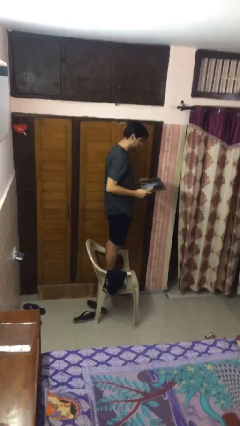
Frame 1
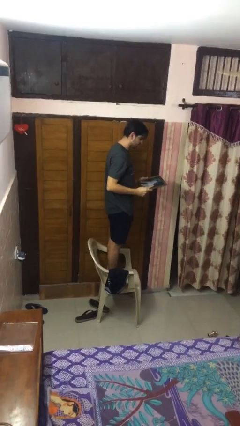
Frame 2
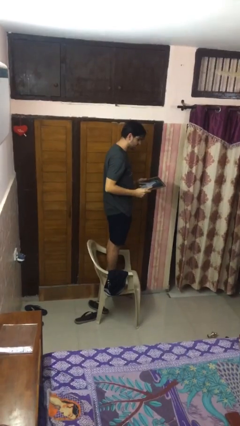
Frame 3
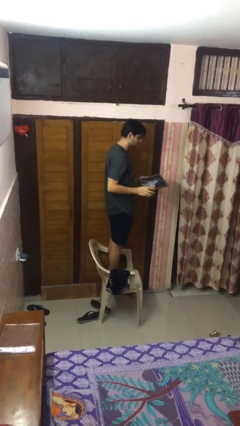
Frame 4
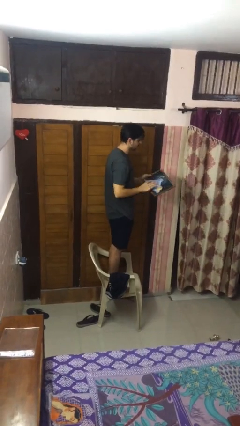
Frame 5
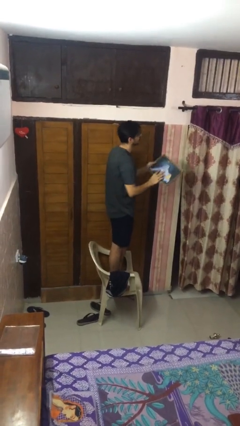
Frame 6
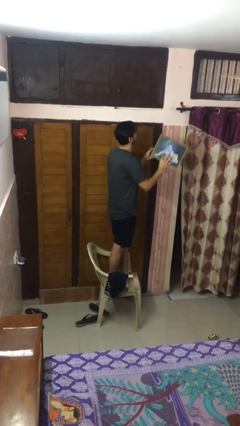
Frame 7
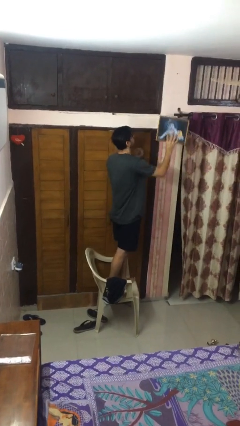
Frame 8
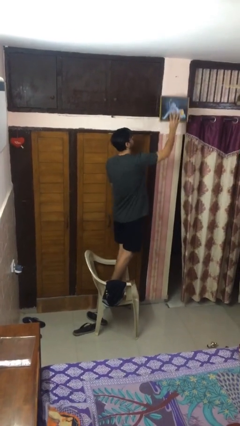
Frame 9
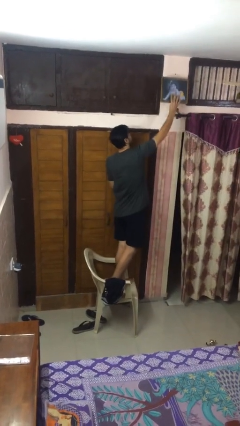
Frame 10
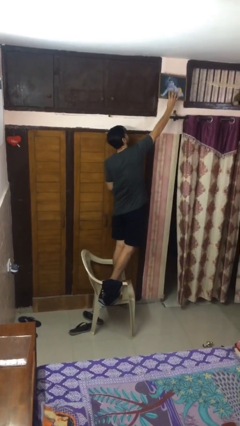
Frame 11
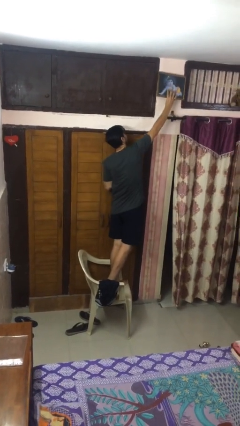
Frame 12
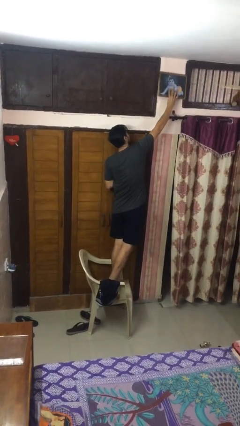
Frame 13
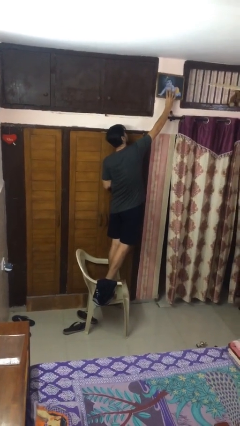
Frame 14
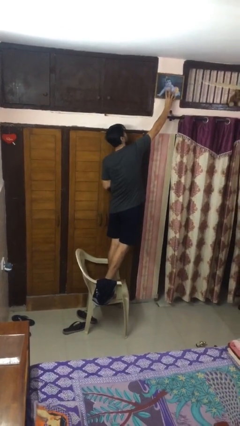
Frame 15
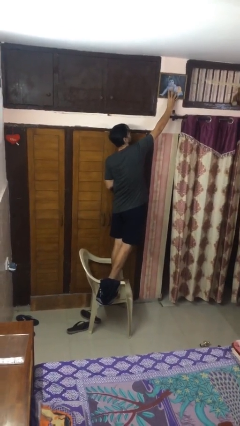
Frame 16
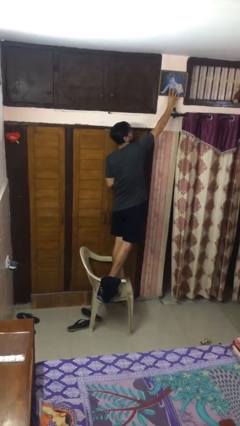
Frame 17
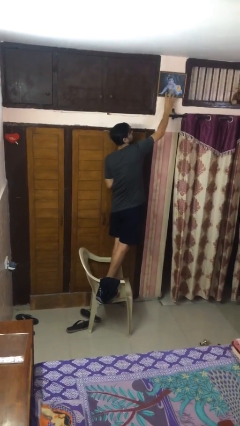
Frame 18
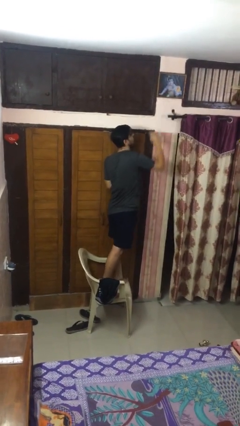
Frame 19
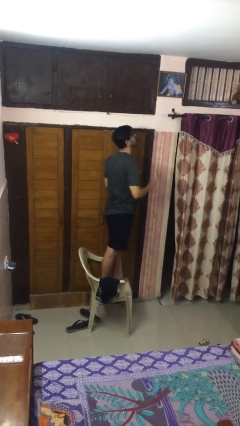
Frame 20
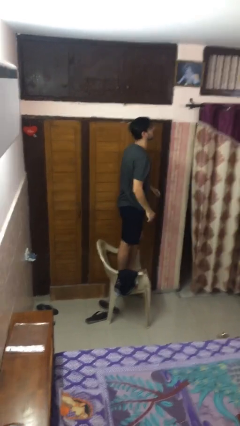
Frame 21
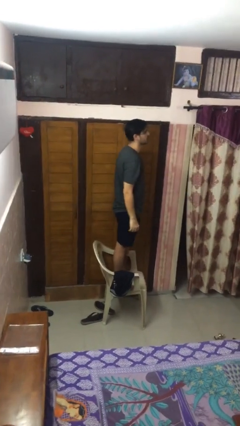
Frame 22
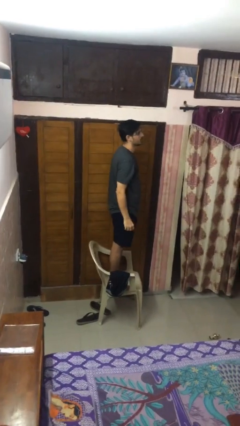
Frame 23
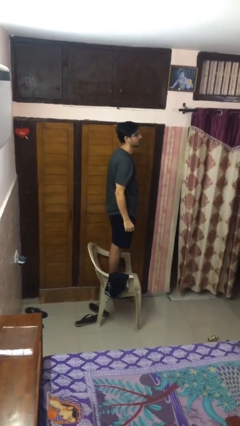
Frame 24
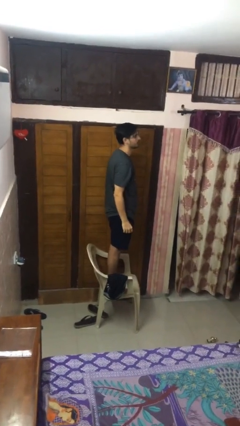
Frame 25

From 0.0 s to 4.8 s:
person puts up picture frame

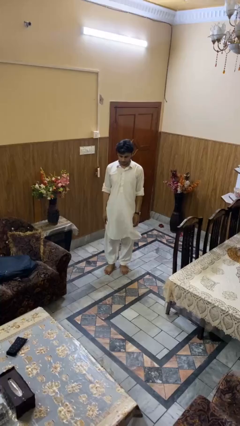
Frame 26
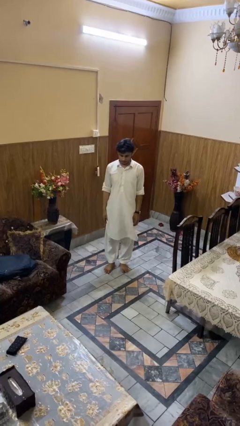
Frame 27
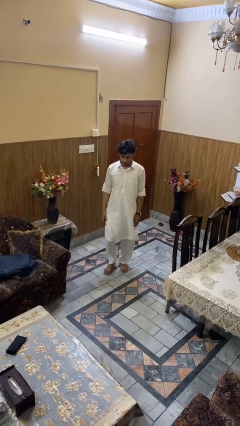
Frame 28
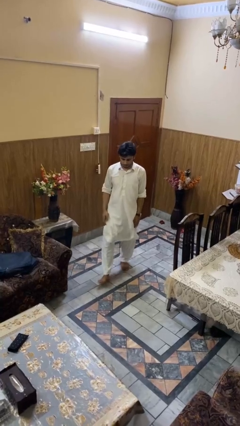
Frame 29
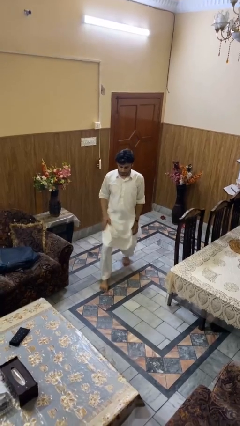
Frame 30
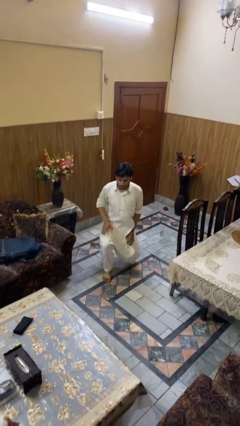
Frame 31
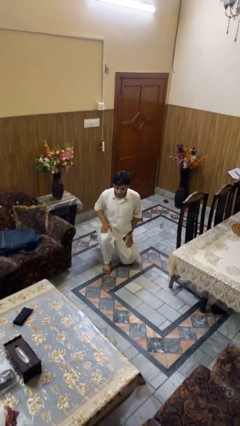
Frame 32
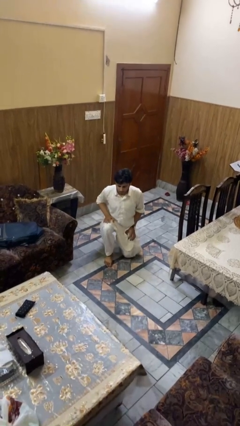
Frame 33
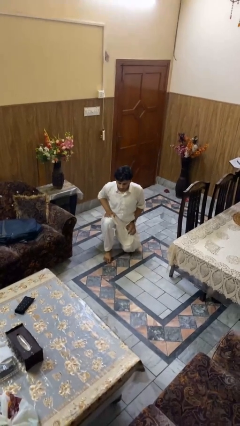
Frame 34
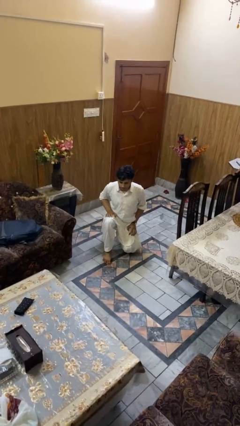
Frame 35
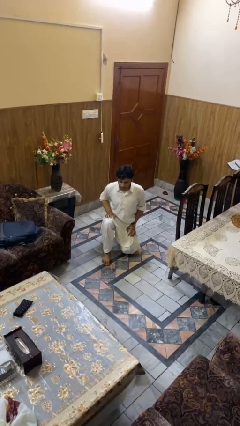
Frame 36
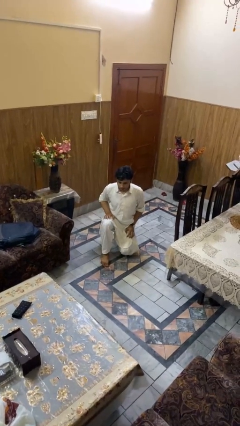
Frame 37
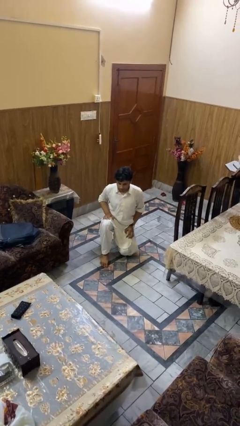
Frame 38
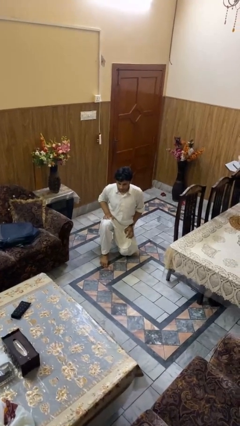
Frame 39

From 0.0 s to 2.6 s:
person kneels

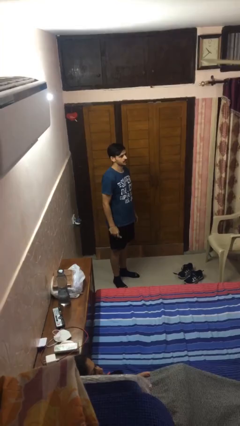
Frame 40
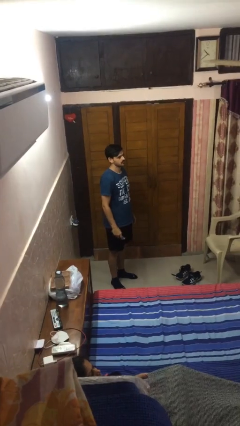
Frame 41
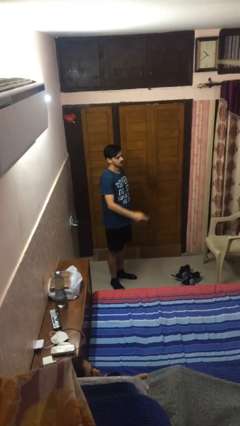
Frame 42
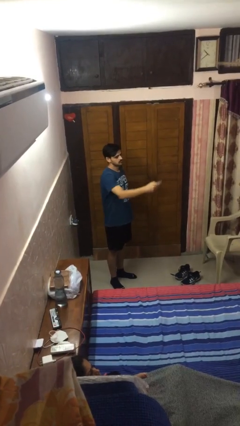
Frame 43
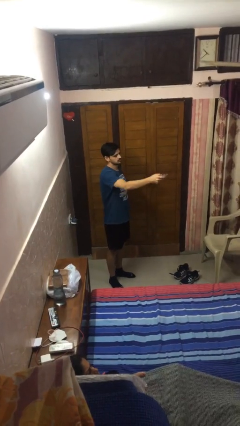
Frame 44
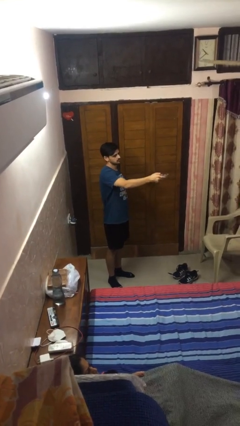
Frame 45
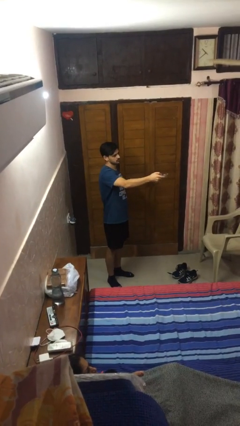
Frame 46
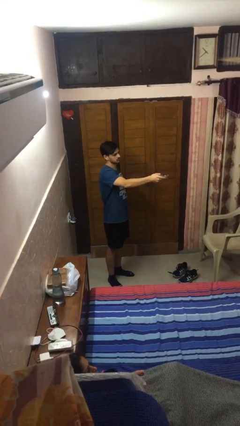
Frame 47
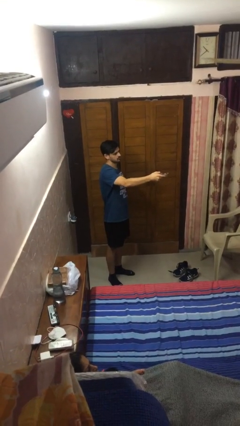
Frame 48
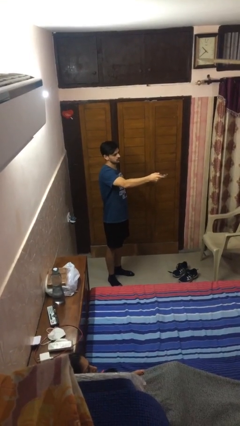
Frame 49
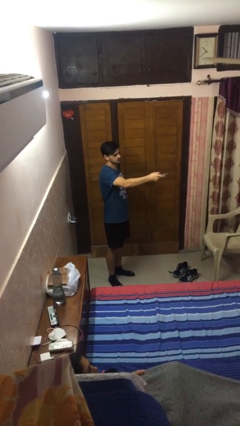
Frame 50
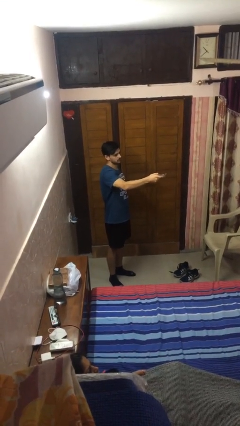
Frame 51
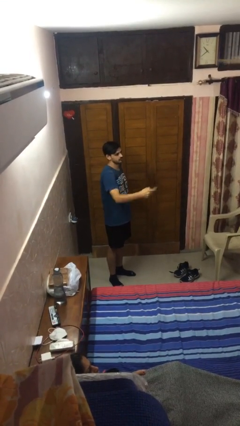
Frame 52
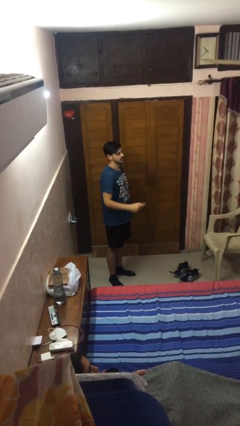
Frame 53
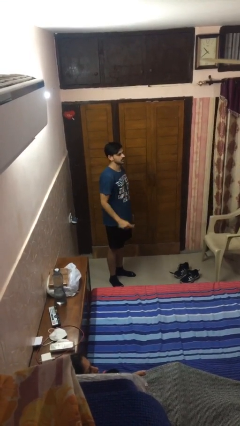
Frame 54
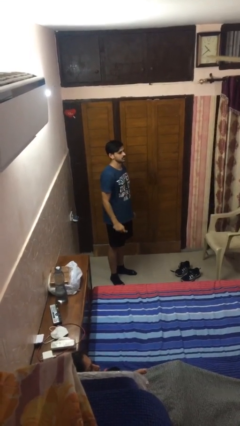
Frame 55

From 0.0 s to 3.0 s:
person uses television remote

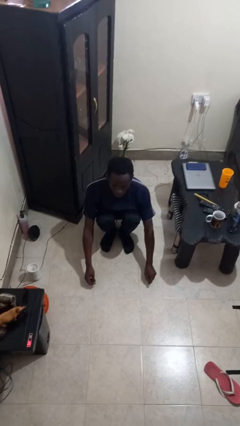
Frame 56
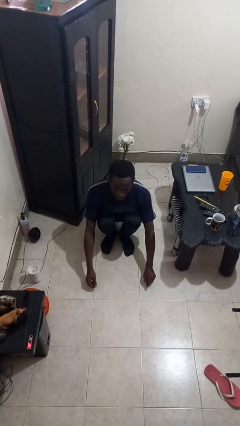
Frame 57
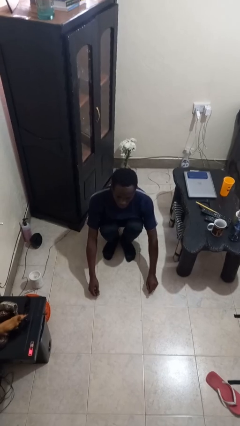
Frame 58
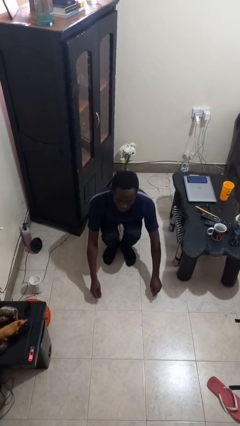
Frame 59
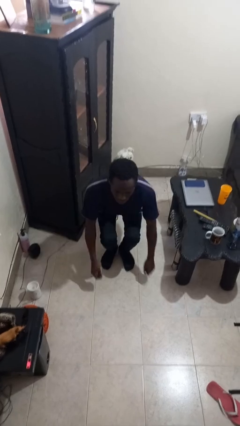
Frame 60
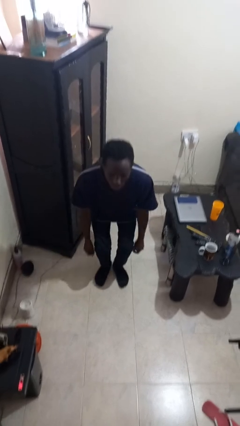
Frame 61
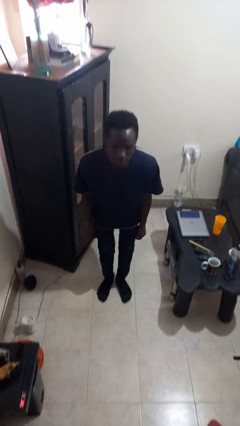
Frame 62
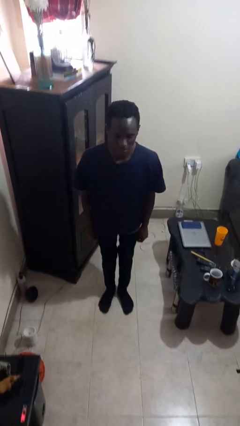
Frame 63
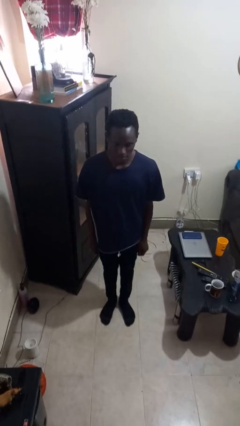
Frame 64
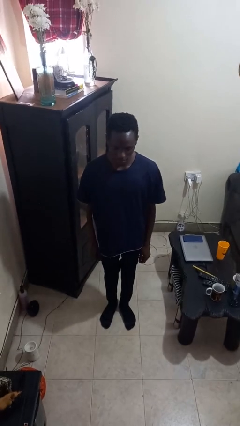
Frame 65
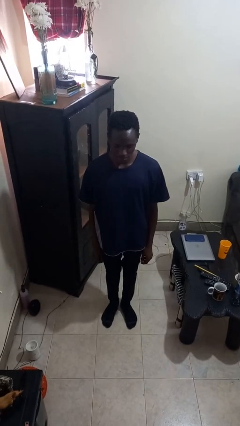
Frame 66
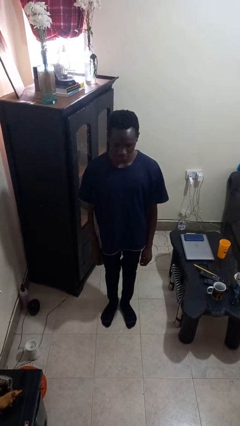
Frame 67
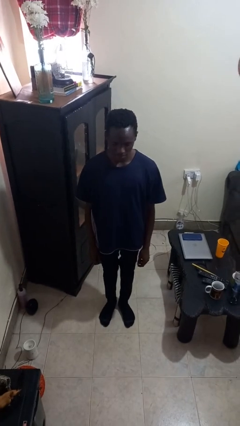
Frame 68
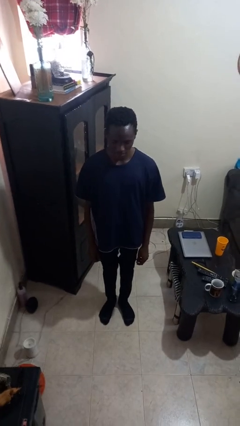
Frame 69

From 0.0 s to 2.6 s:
person stands up

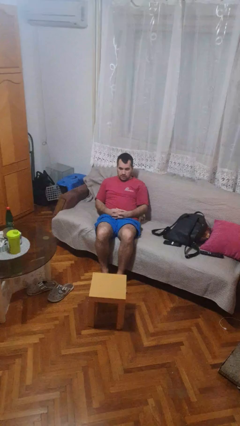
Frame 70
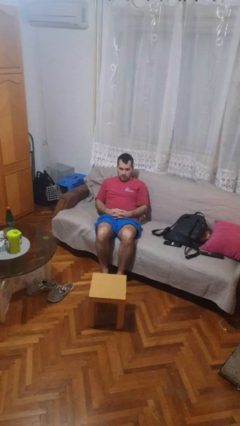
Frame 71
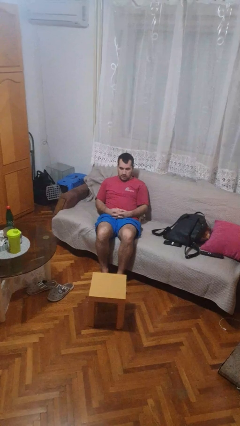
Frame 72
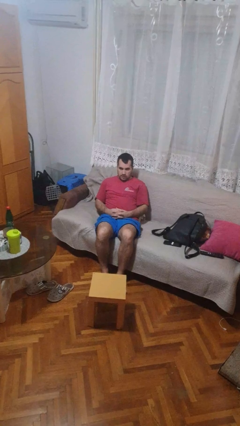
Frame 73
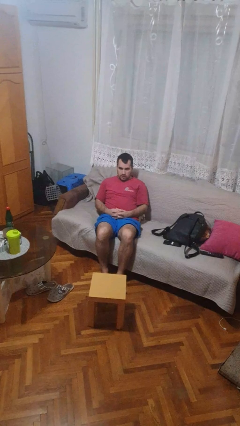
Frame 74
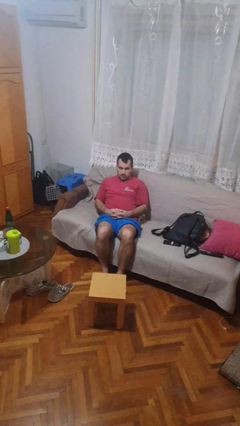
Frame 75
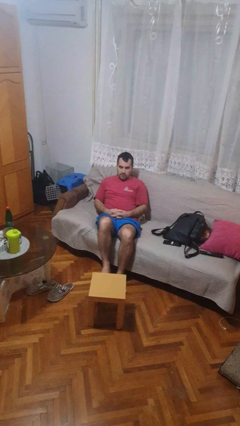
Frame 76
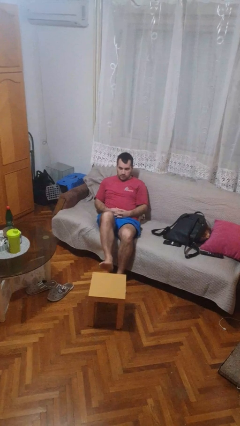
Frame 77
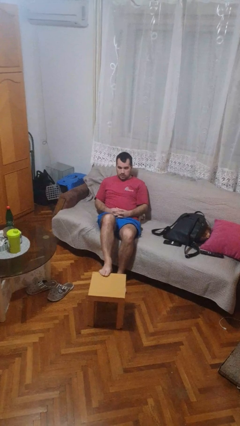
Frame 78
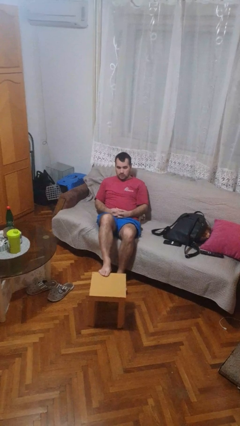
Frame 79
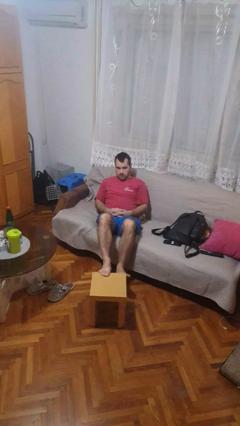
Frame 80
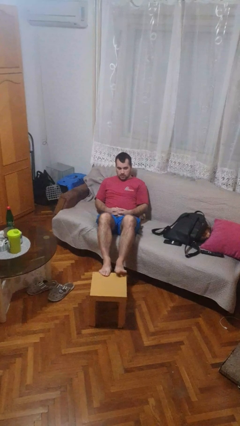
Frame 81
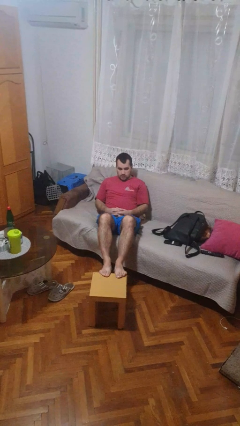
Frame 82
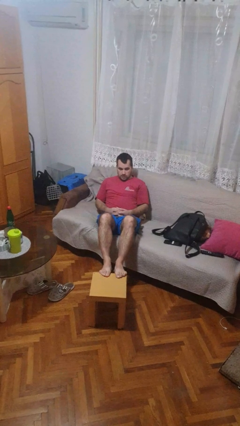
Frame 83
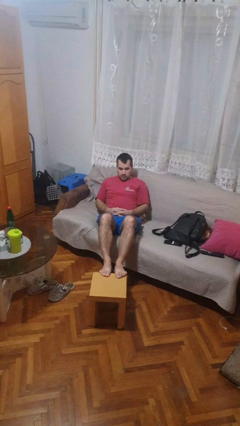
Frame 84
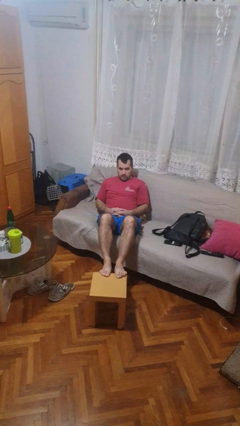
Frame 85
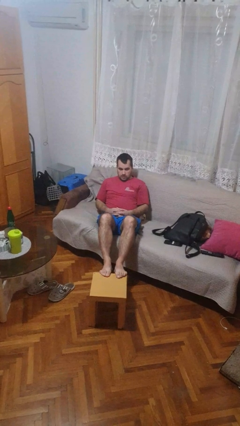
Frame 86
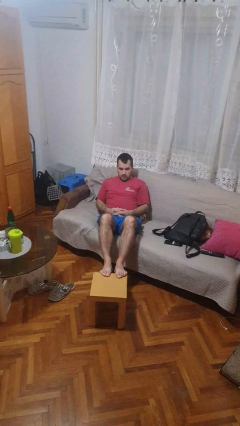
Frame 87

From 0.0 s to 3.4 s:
person puts feet up

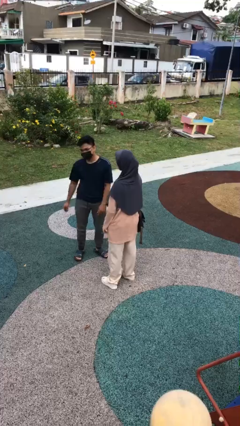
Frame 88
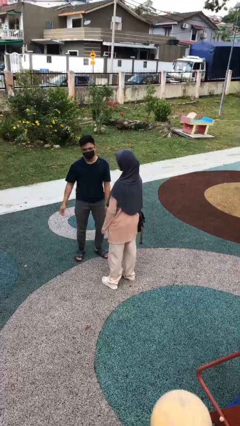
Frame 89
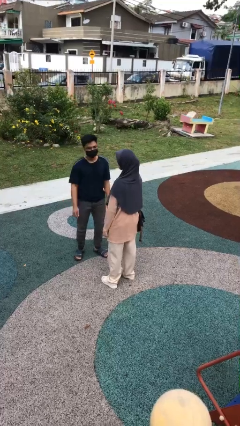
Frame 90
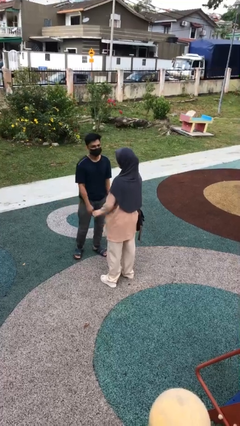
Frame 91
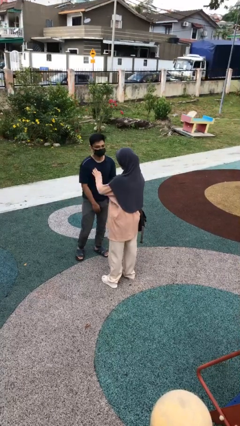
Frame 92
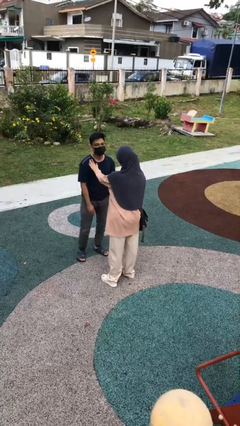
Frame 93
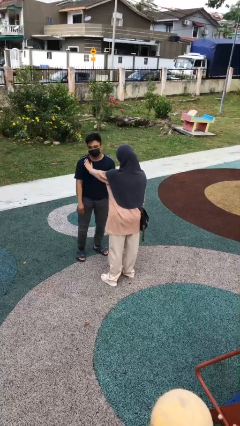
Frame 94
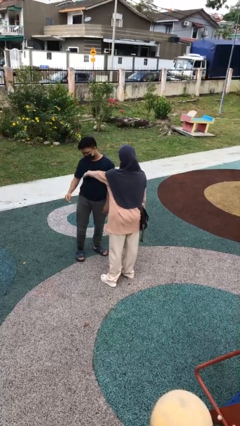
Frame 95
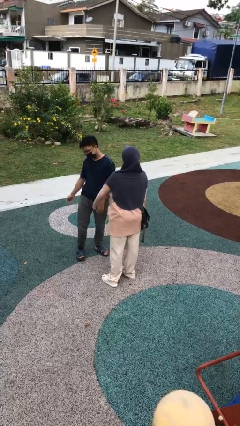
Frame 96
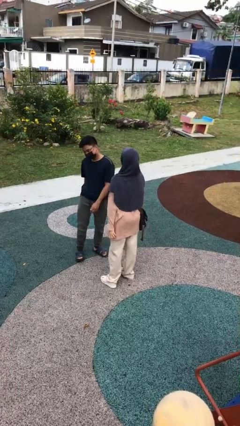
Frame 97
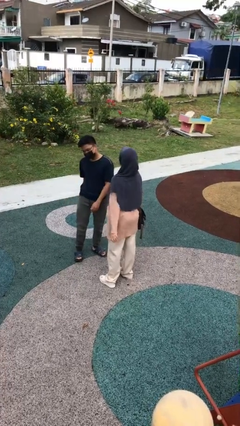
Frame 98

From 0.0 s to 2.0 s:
person shoves person
